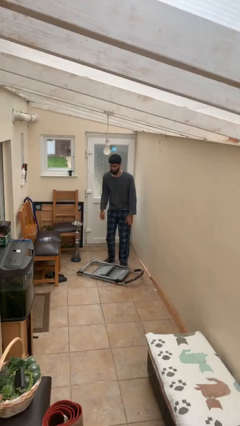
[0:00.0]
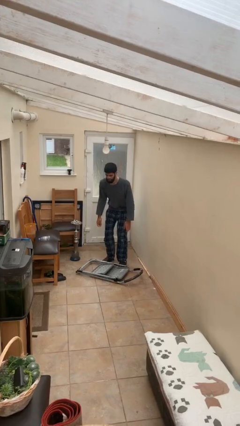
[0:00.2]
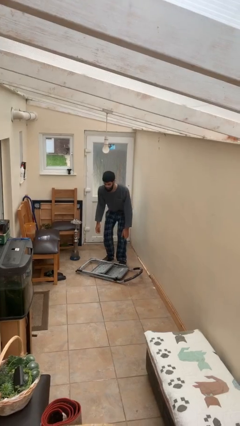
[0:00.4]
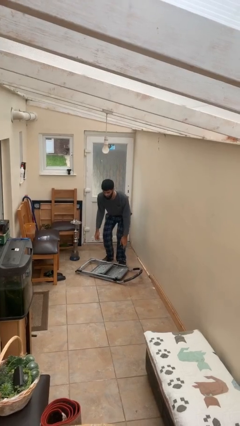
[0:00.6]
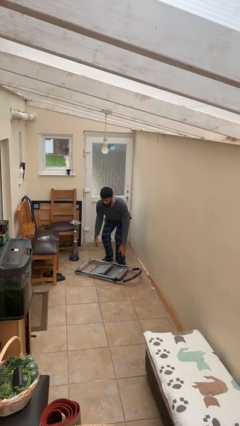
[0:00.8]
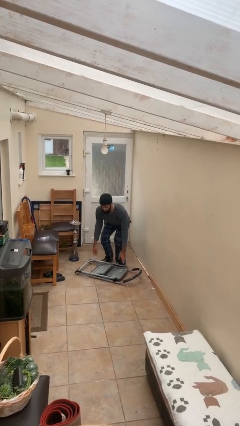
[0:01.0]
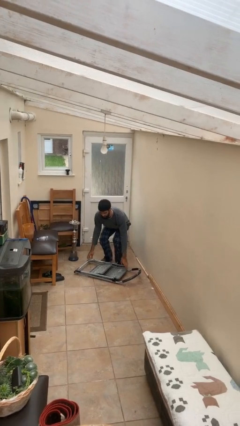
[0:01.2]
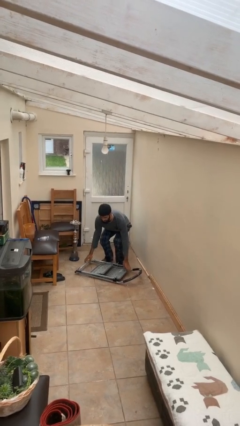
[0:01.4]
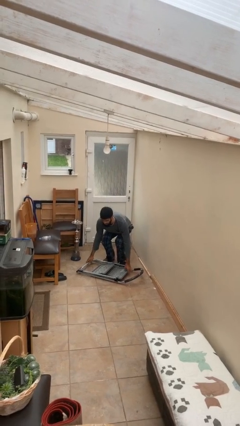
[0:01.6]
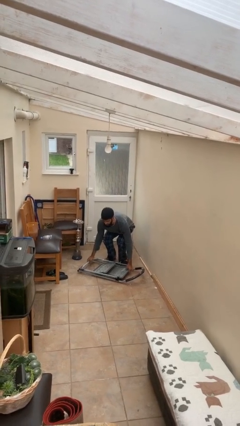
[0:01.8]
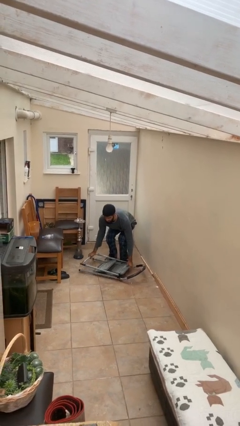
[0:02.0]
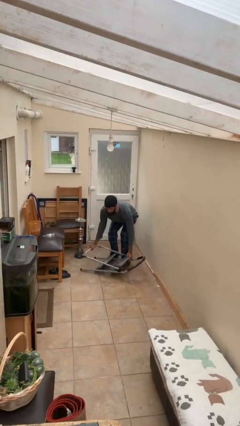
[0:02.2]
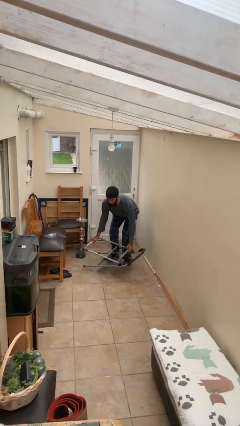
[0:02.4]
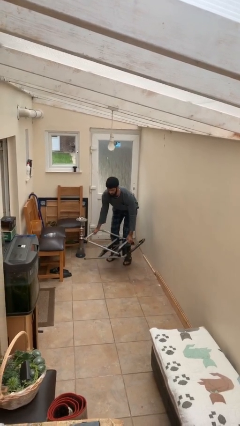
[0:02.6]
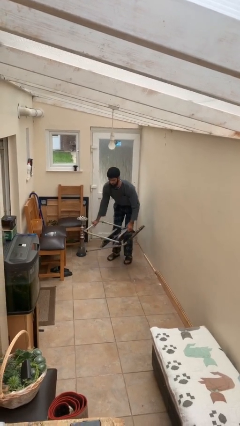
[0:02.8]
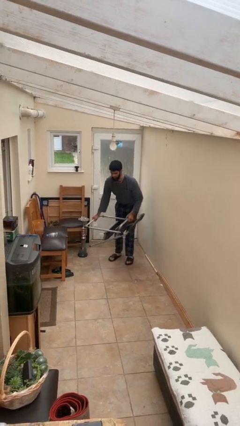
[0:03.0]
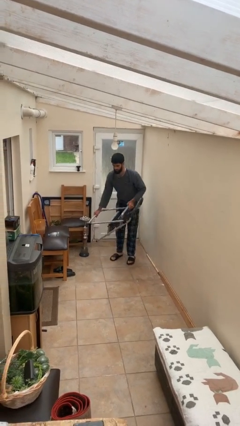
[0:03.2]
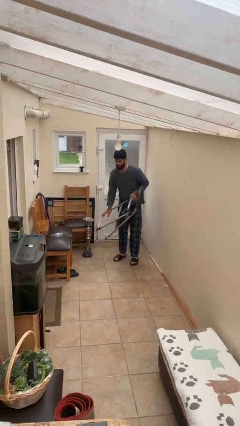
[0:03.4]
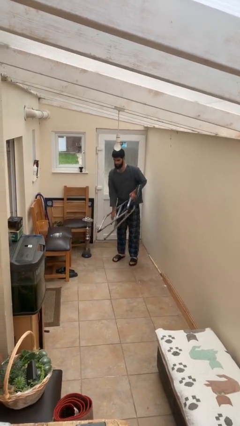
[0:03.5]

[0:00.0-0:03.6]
person picks up object from floor

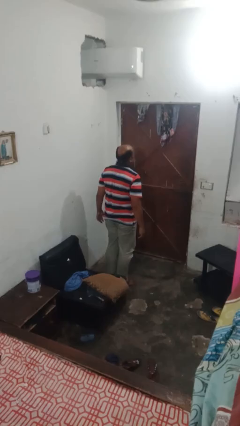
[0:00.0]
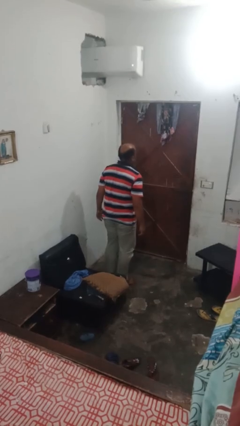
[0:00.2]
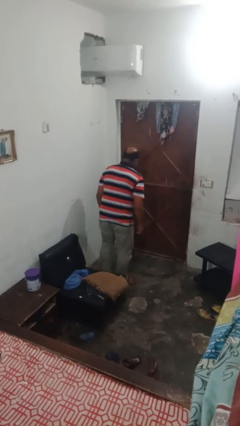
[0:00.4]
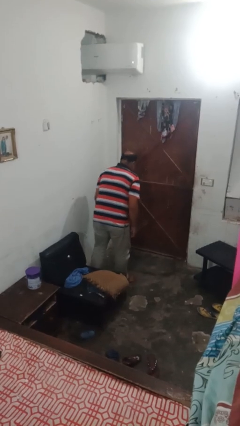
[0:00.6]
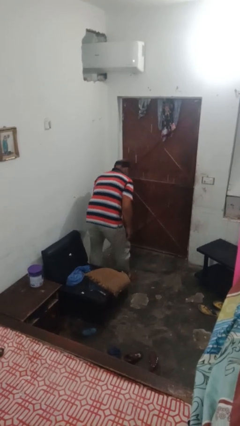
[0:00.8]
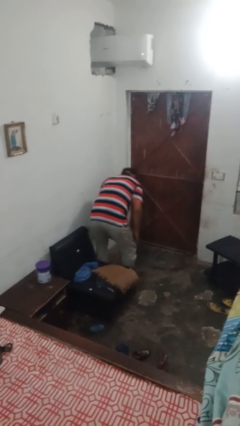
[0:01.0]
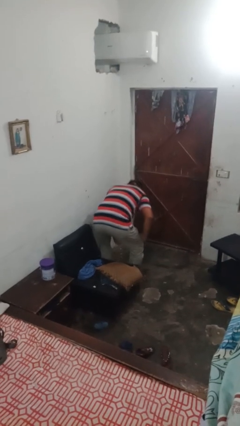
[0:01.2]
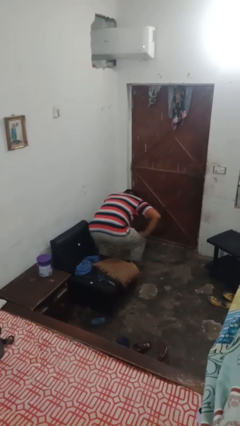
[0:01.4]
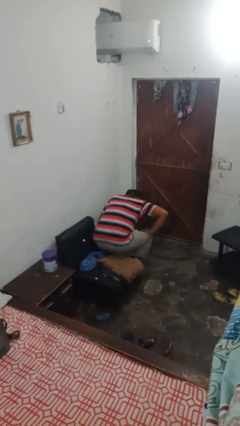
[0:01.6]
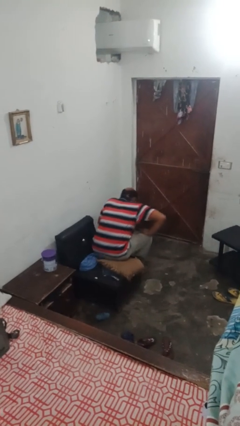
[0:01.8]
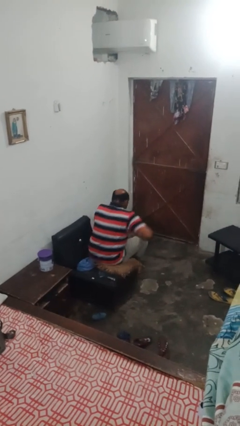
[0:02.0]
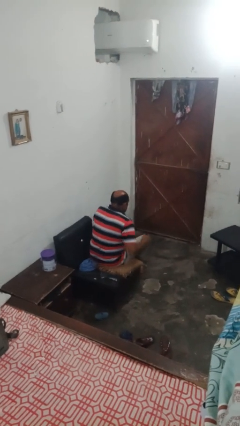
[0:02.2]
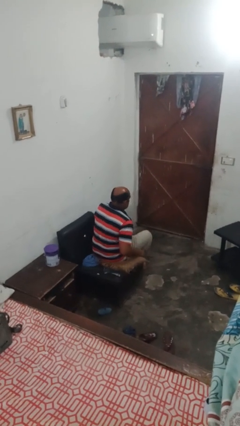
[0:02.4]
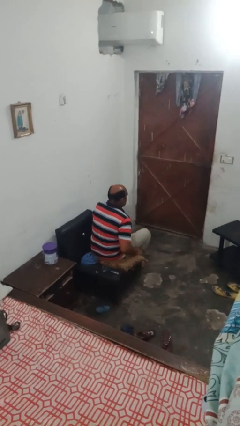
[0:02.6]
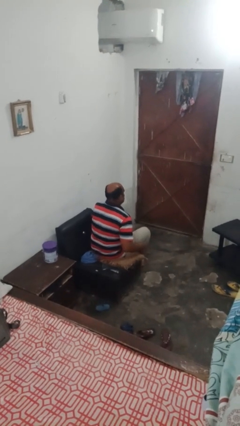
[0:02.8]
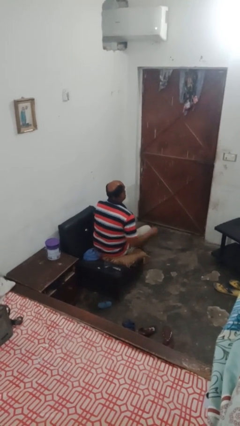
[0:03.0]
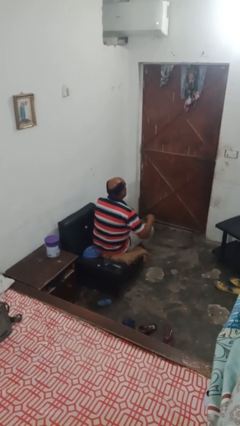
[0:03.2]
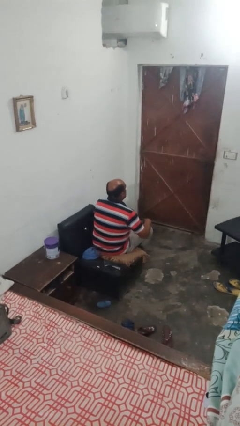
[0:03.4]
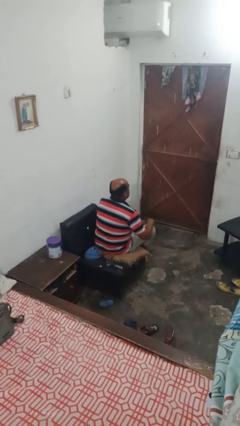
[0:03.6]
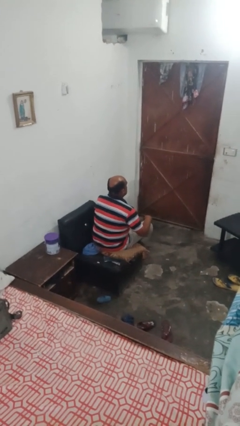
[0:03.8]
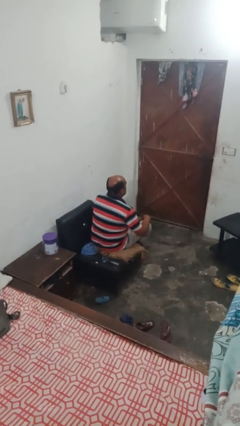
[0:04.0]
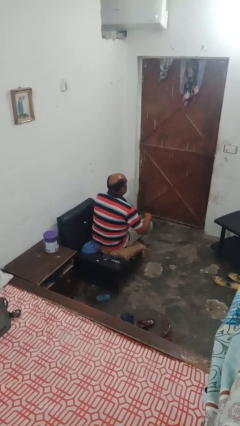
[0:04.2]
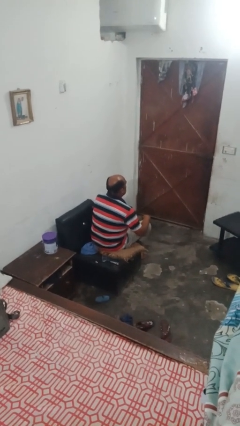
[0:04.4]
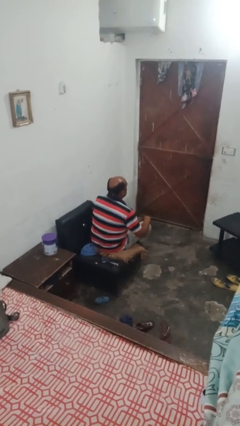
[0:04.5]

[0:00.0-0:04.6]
person sits down

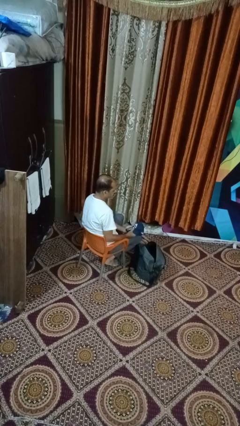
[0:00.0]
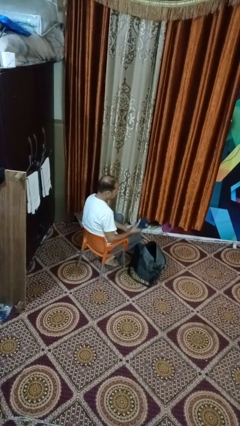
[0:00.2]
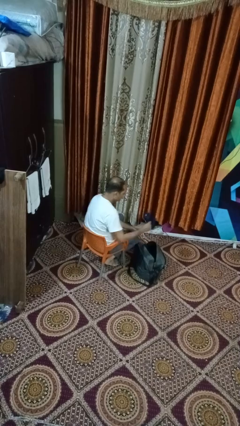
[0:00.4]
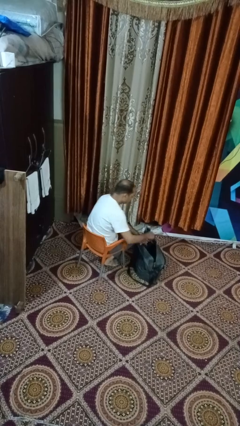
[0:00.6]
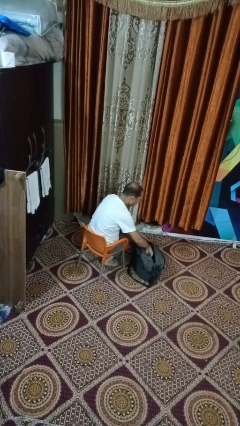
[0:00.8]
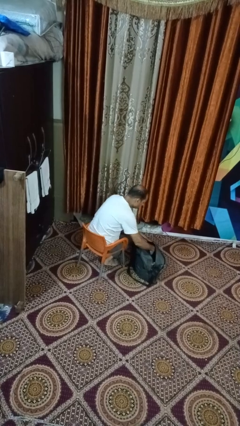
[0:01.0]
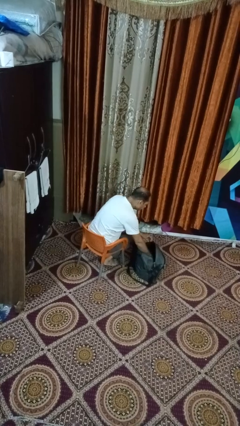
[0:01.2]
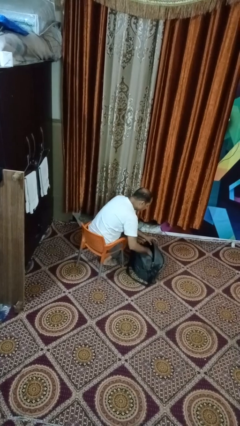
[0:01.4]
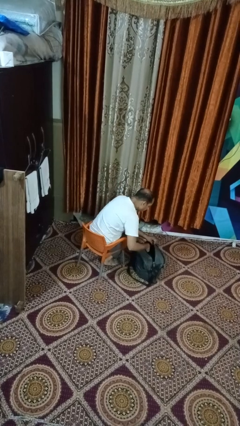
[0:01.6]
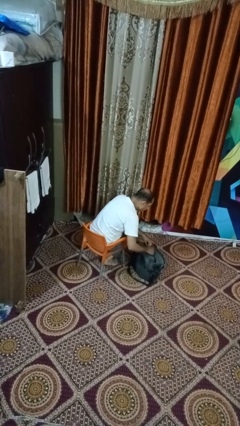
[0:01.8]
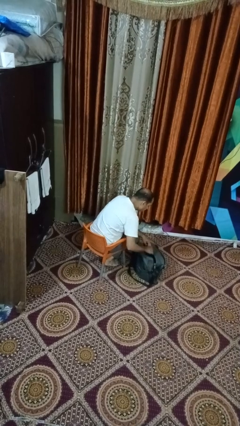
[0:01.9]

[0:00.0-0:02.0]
person puts object into backpack

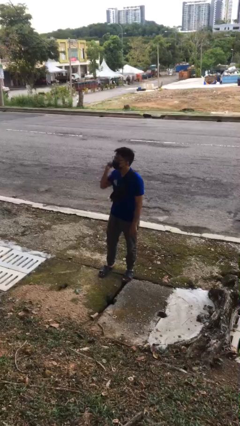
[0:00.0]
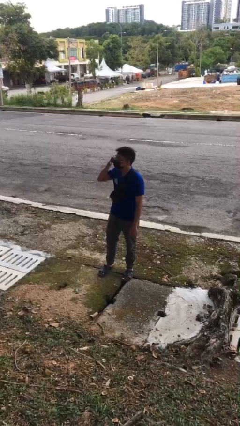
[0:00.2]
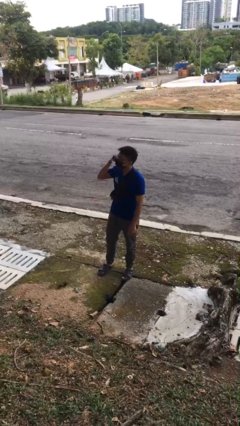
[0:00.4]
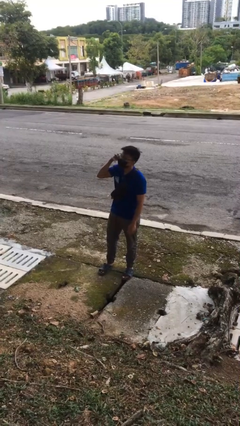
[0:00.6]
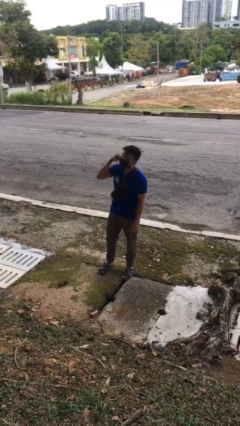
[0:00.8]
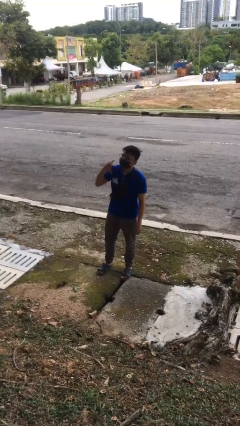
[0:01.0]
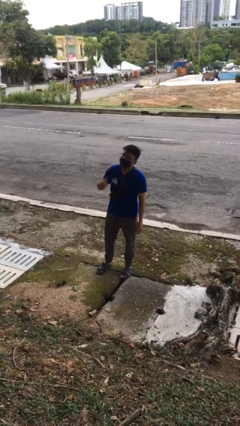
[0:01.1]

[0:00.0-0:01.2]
person gestures call me

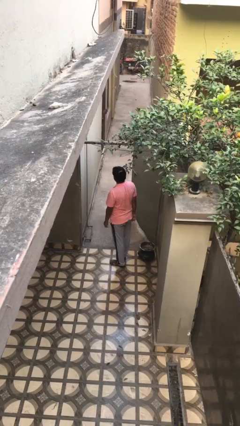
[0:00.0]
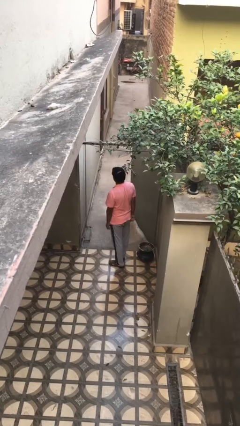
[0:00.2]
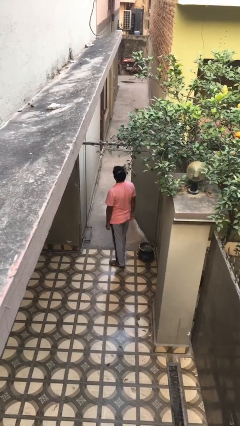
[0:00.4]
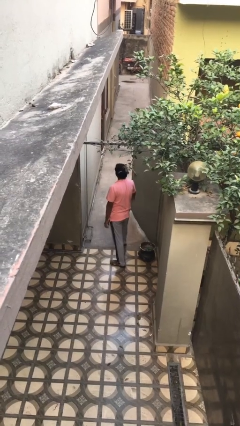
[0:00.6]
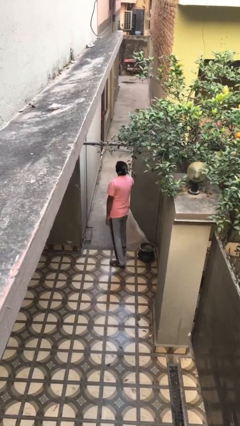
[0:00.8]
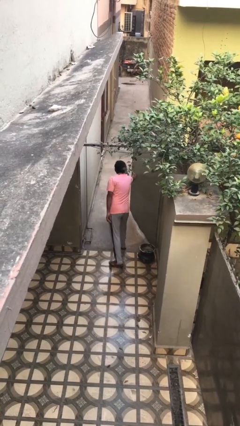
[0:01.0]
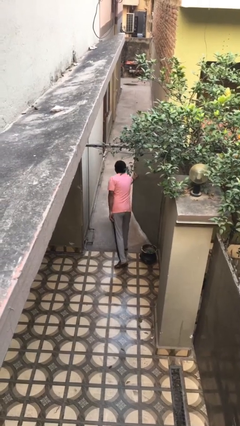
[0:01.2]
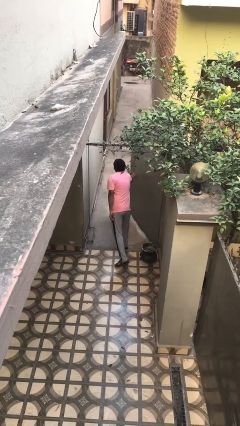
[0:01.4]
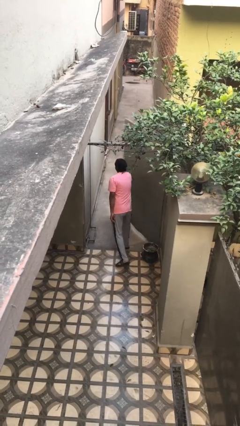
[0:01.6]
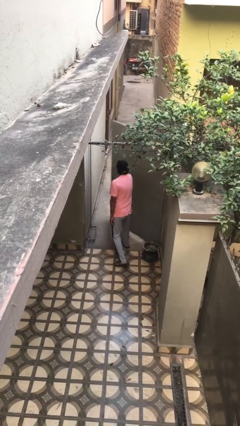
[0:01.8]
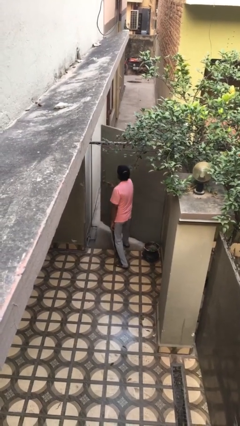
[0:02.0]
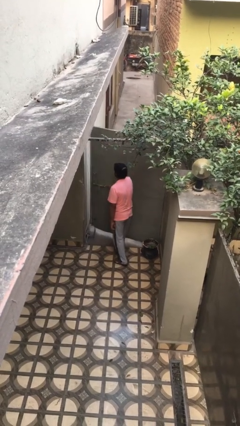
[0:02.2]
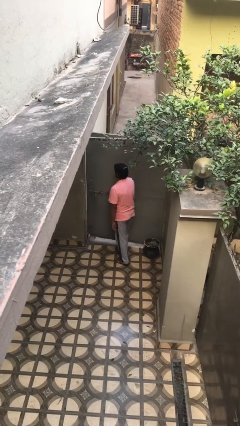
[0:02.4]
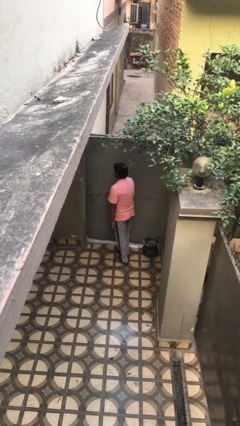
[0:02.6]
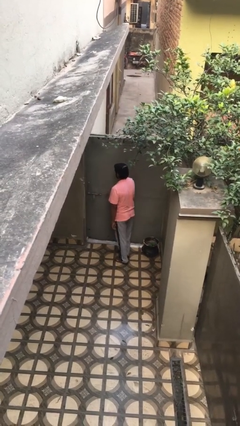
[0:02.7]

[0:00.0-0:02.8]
person closes facility door

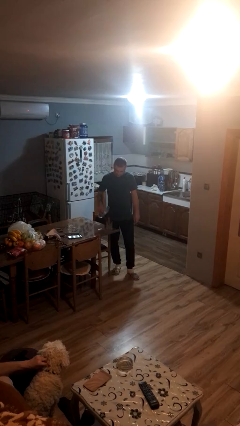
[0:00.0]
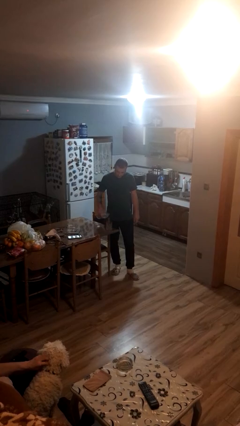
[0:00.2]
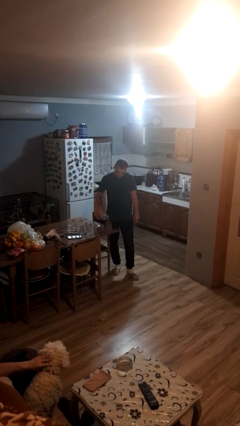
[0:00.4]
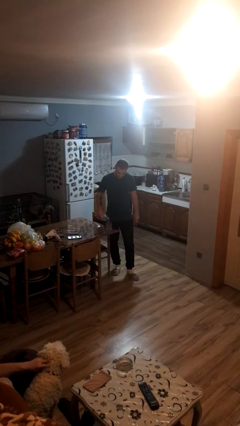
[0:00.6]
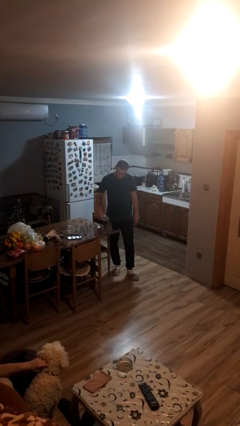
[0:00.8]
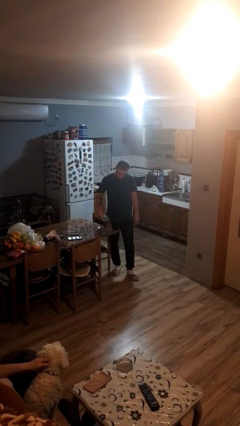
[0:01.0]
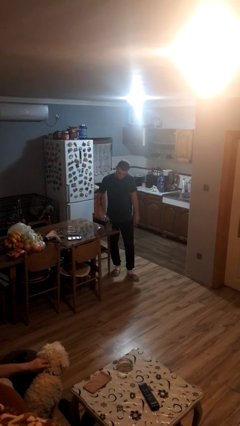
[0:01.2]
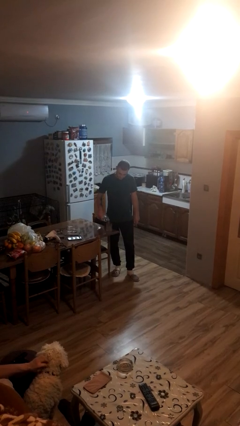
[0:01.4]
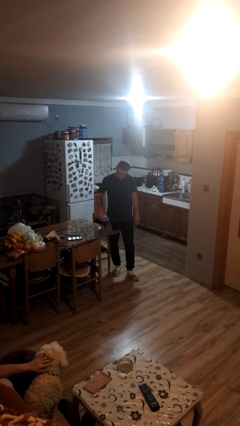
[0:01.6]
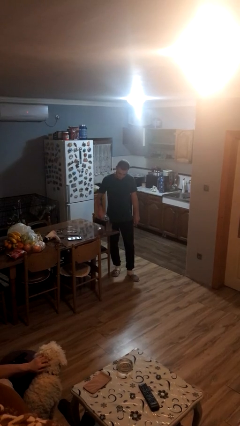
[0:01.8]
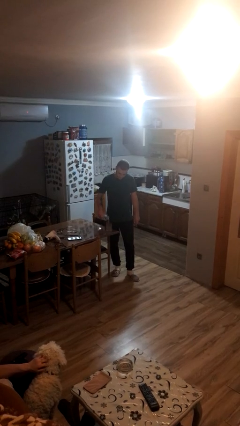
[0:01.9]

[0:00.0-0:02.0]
person pours liquid into cup

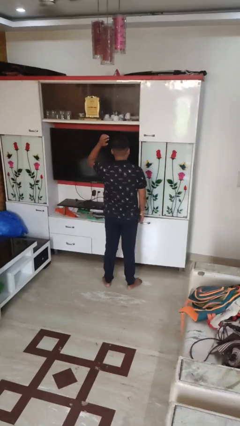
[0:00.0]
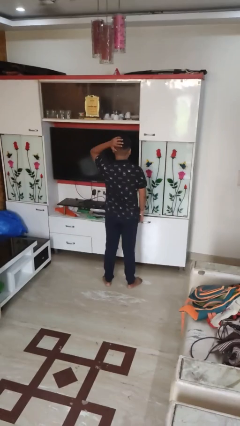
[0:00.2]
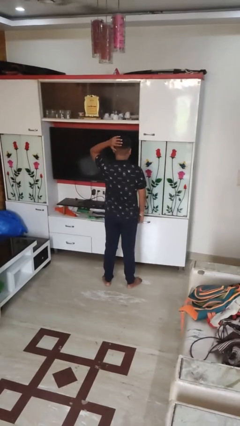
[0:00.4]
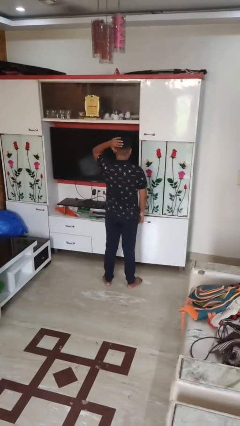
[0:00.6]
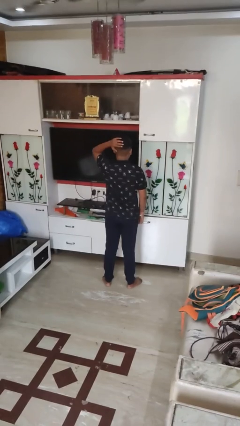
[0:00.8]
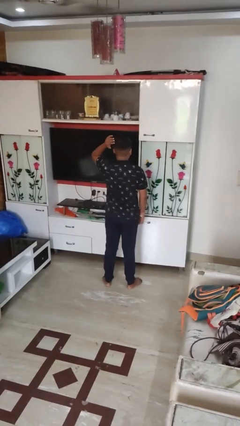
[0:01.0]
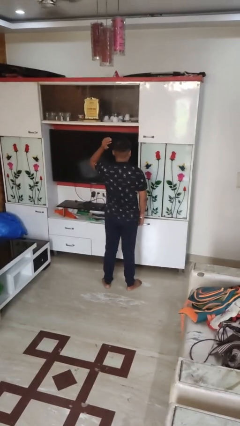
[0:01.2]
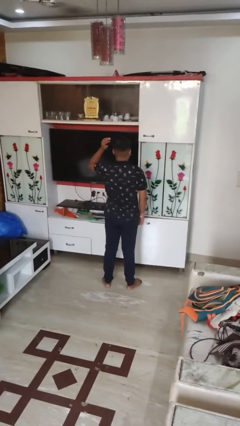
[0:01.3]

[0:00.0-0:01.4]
person pats head
